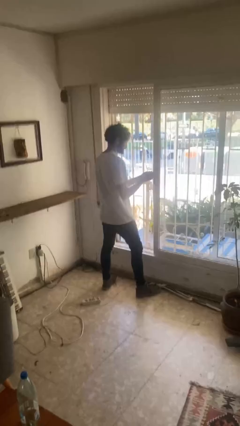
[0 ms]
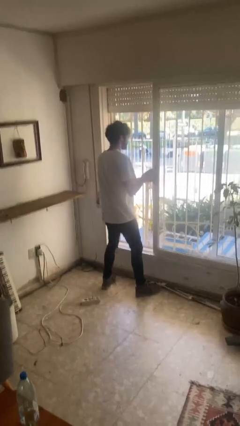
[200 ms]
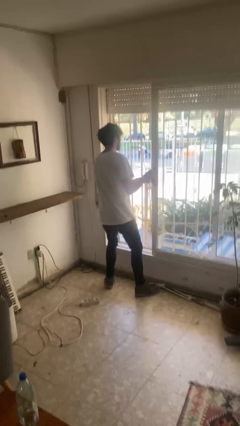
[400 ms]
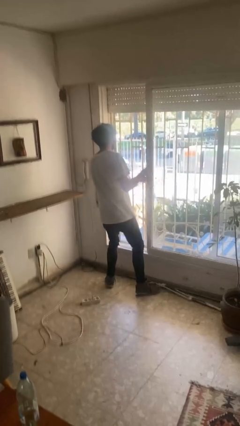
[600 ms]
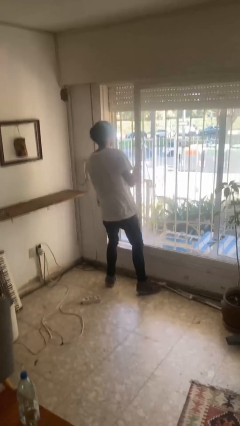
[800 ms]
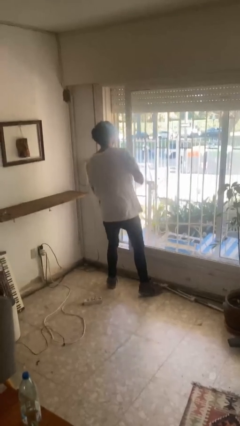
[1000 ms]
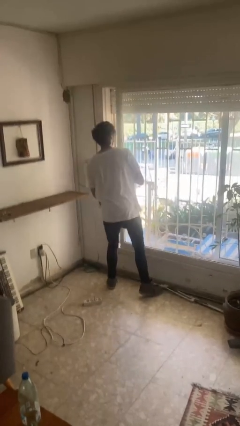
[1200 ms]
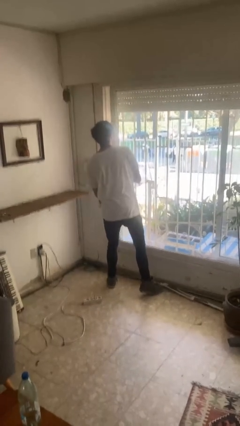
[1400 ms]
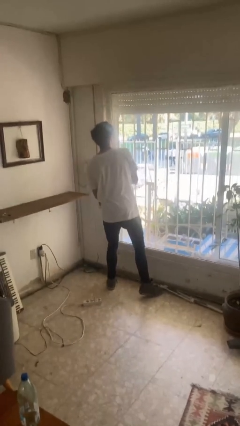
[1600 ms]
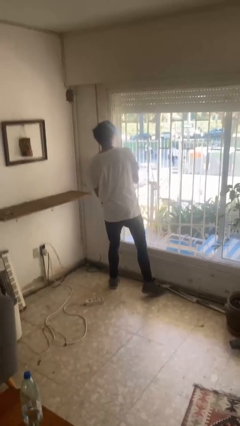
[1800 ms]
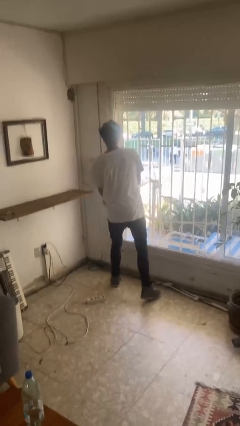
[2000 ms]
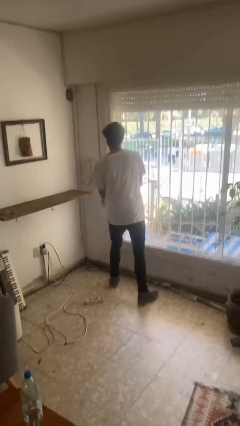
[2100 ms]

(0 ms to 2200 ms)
person closes sliding door

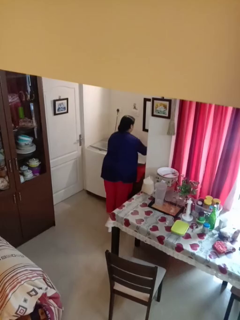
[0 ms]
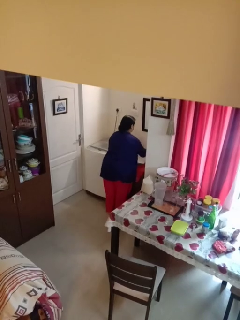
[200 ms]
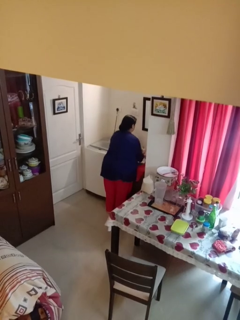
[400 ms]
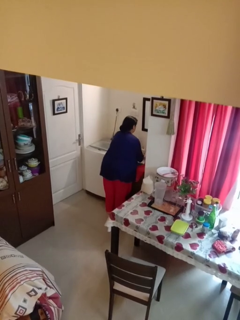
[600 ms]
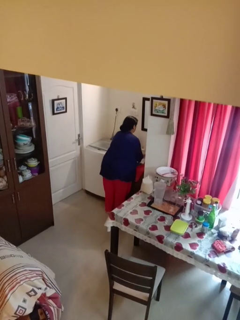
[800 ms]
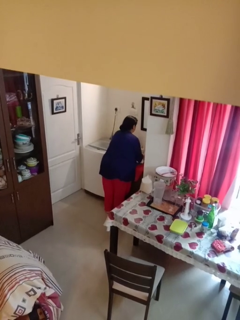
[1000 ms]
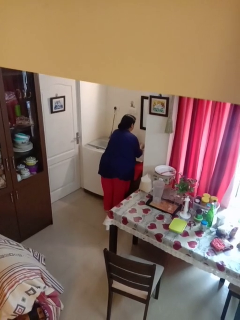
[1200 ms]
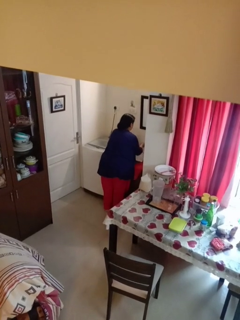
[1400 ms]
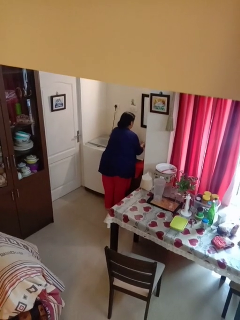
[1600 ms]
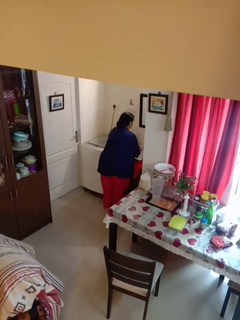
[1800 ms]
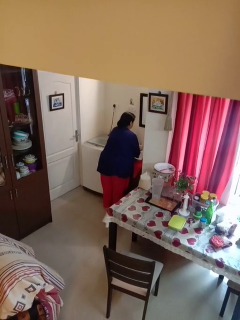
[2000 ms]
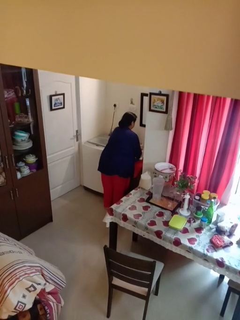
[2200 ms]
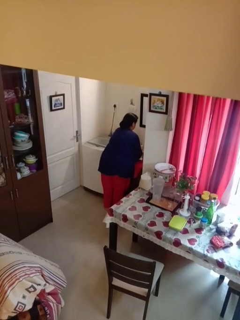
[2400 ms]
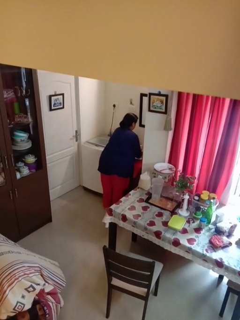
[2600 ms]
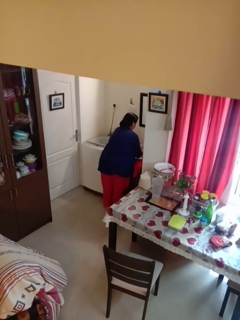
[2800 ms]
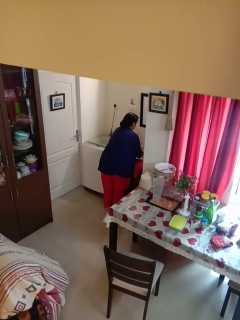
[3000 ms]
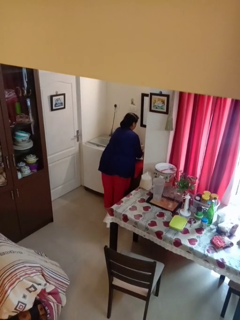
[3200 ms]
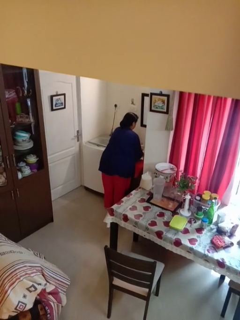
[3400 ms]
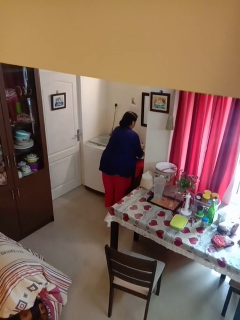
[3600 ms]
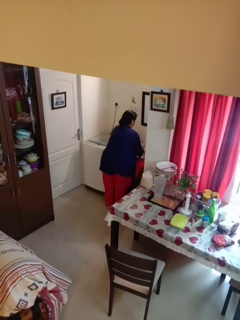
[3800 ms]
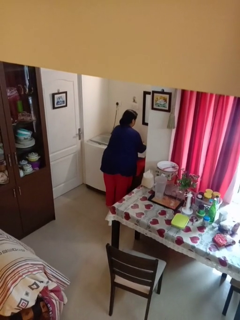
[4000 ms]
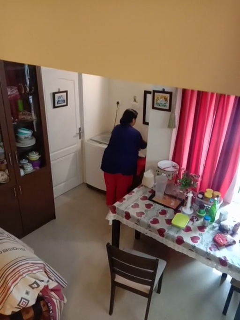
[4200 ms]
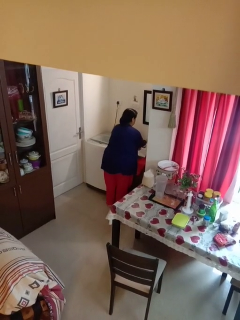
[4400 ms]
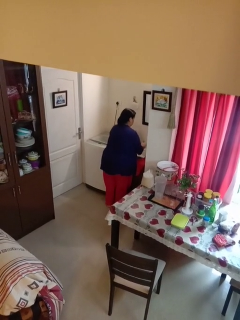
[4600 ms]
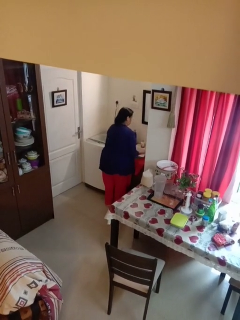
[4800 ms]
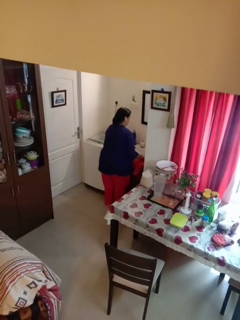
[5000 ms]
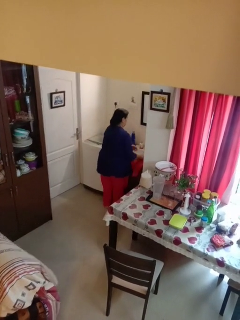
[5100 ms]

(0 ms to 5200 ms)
person washes hands

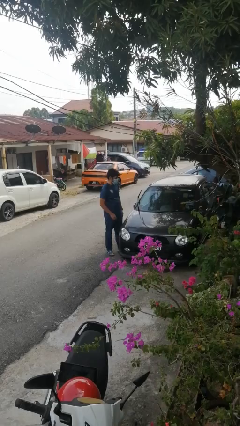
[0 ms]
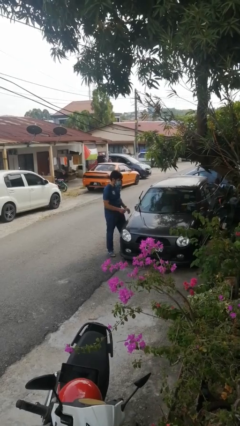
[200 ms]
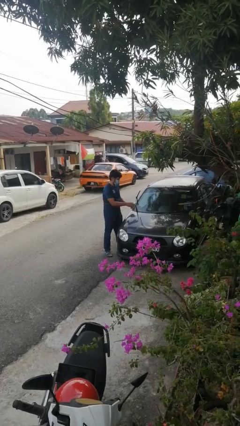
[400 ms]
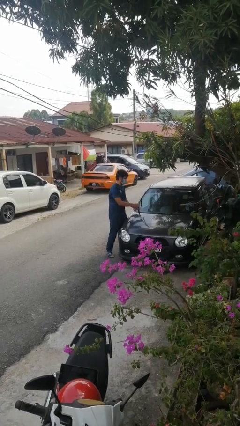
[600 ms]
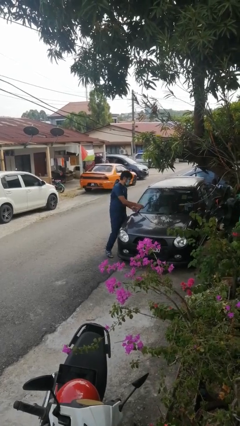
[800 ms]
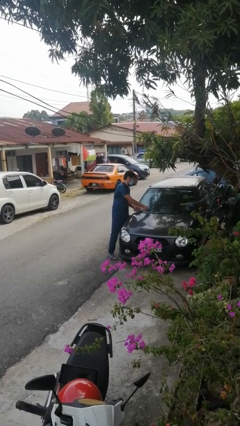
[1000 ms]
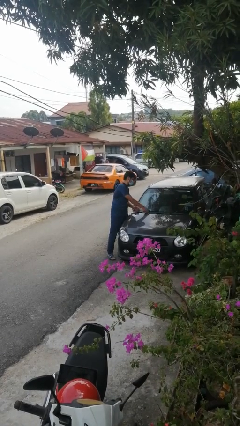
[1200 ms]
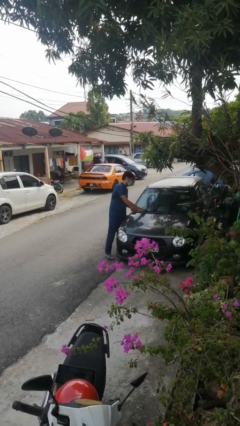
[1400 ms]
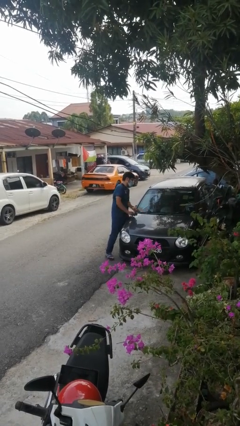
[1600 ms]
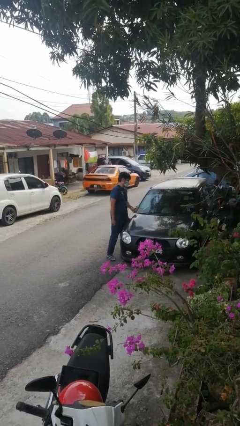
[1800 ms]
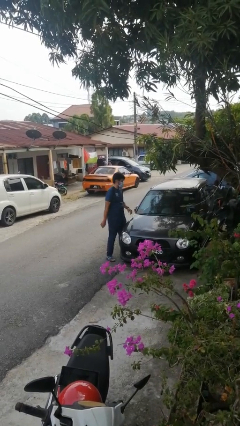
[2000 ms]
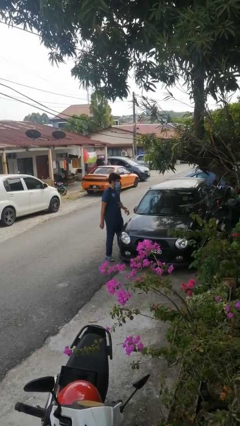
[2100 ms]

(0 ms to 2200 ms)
person flips down car wipers

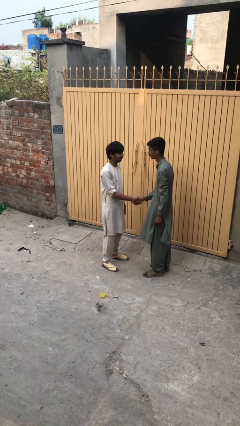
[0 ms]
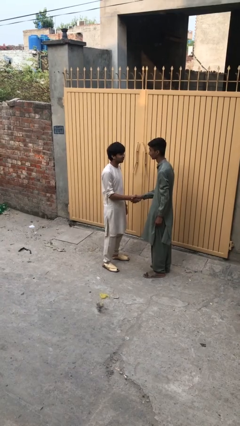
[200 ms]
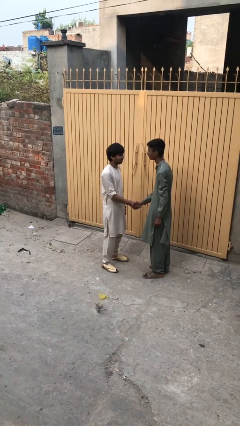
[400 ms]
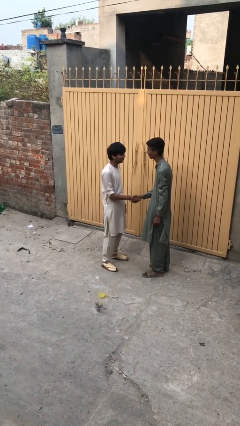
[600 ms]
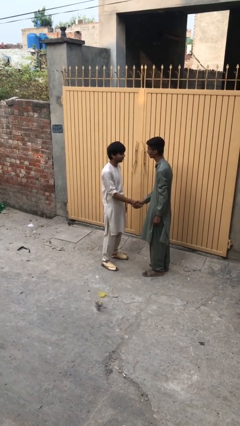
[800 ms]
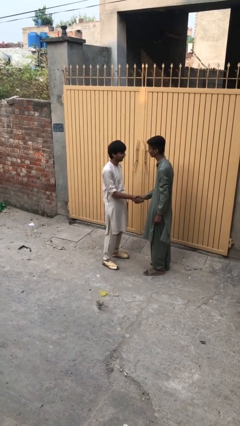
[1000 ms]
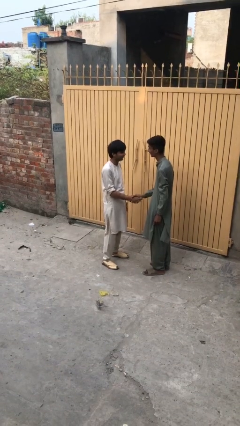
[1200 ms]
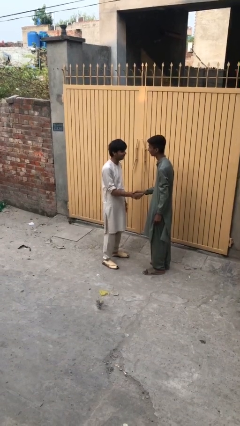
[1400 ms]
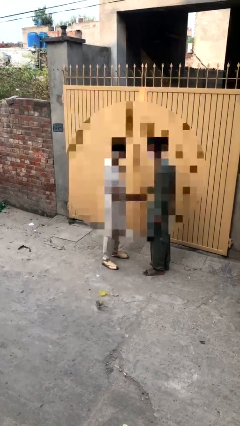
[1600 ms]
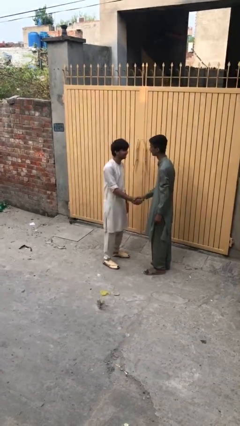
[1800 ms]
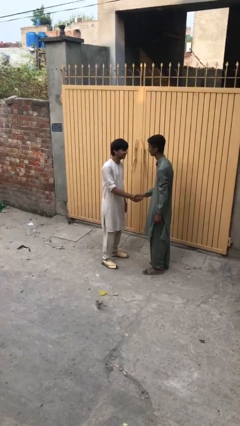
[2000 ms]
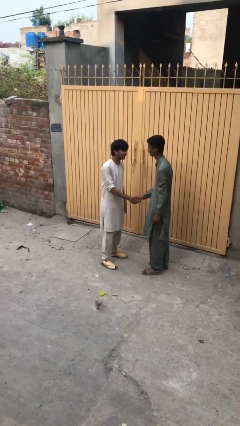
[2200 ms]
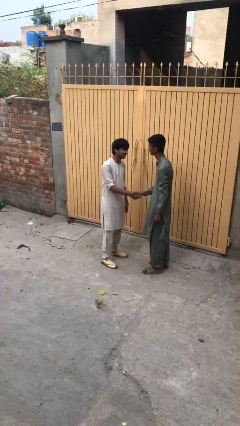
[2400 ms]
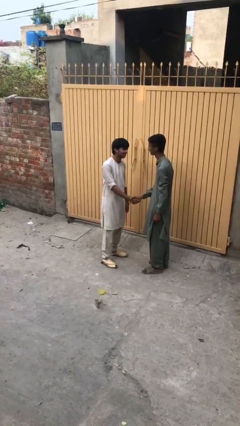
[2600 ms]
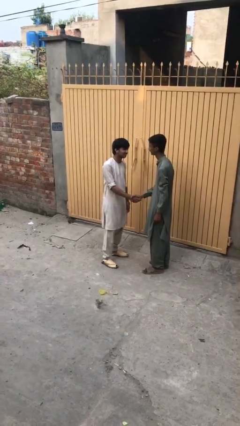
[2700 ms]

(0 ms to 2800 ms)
person shakes hand

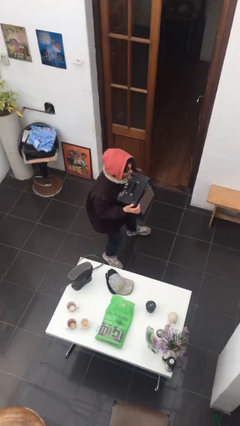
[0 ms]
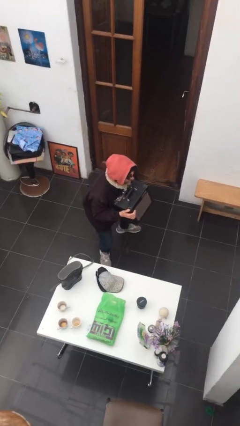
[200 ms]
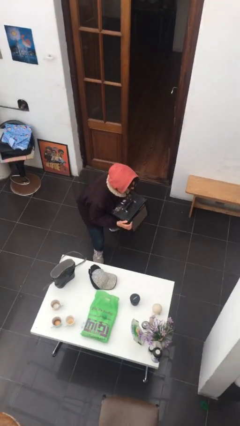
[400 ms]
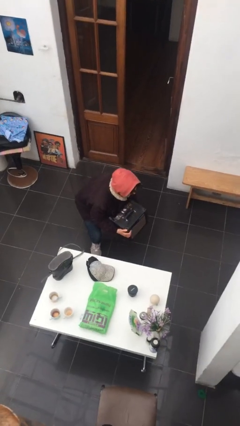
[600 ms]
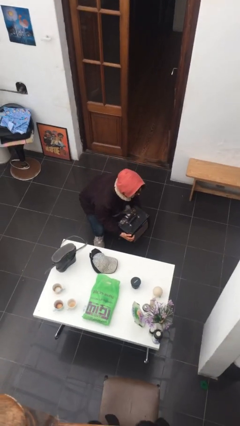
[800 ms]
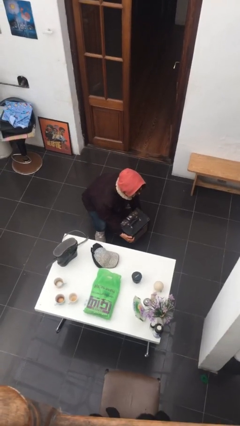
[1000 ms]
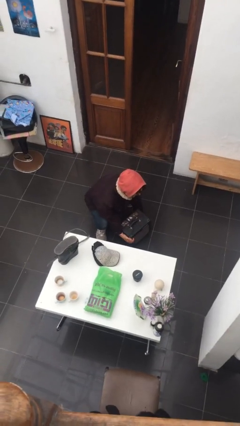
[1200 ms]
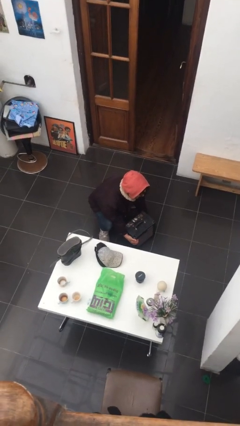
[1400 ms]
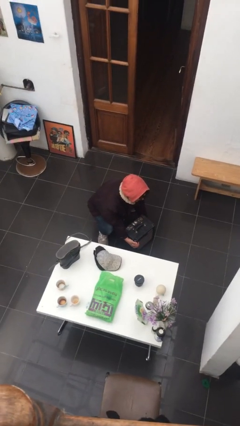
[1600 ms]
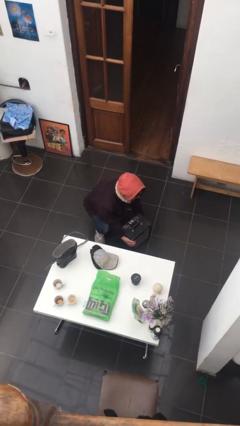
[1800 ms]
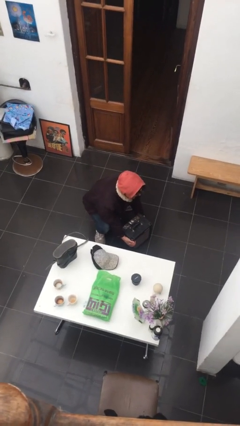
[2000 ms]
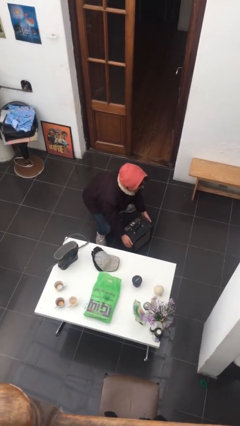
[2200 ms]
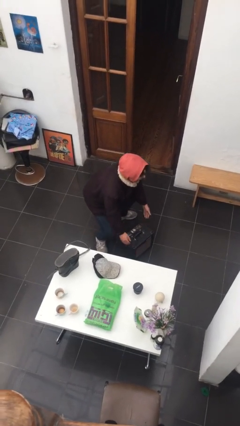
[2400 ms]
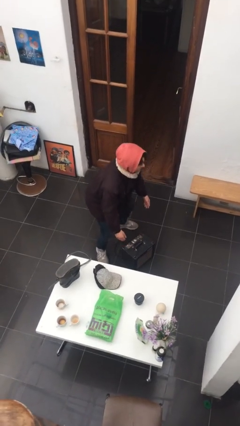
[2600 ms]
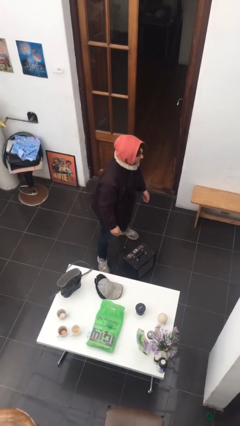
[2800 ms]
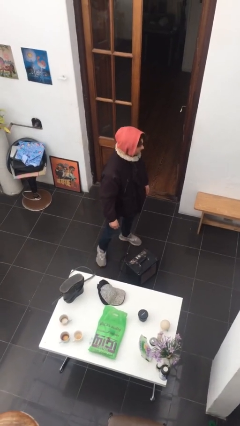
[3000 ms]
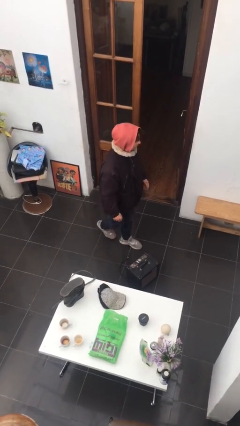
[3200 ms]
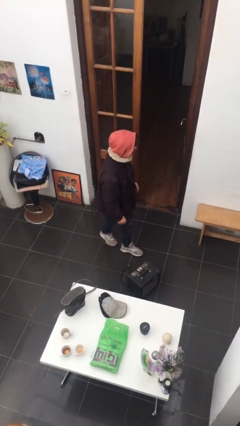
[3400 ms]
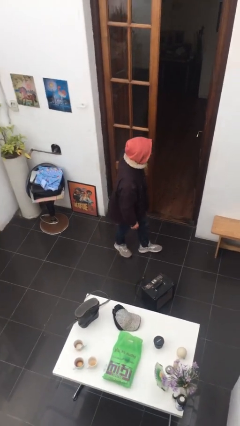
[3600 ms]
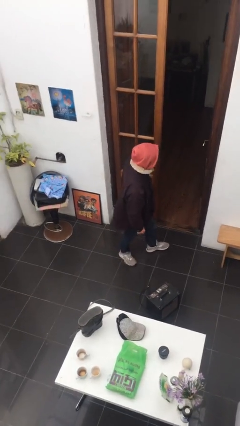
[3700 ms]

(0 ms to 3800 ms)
person puts down object on floor

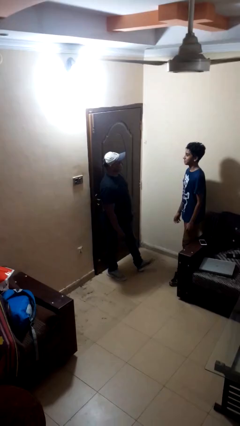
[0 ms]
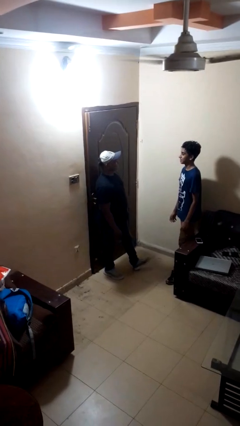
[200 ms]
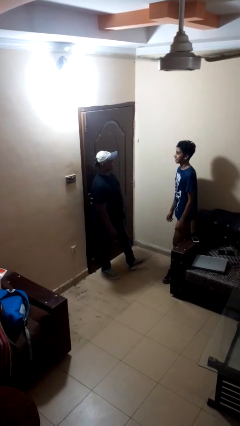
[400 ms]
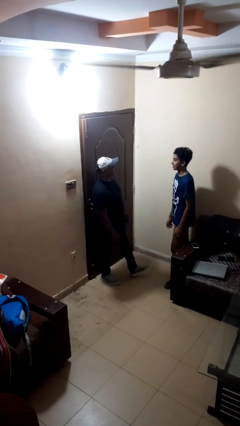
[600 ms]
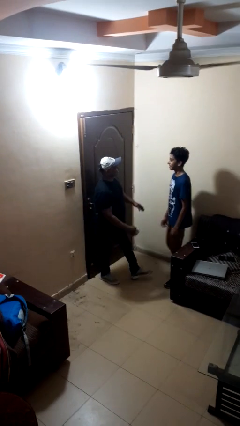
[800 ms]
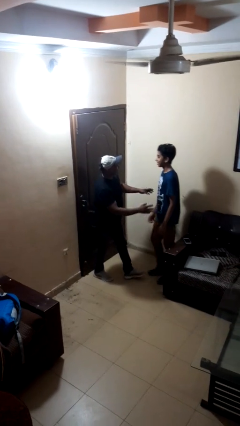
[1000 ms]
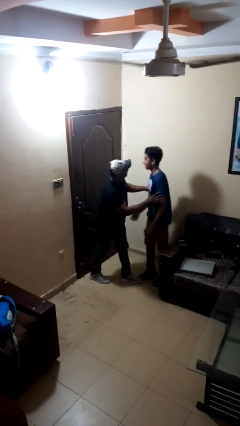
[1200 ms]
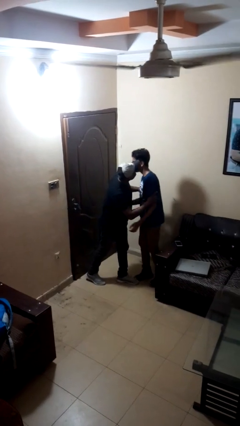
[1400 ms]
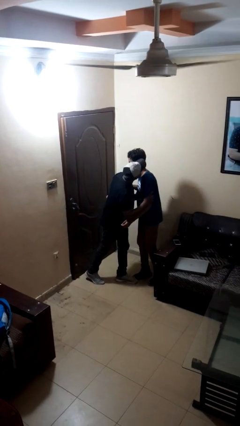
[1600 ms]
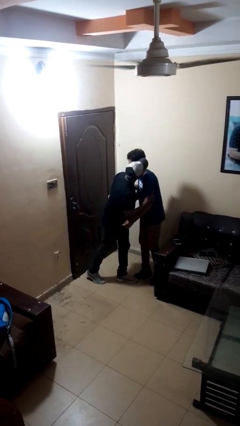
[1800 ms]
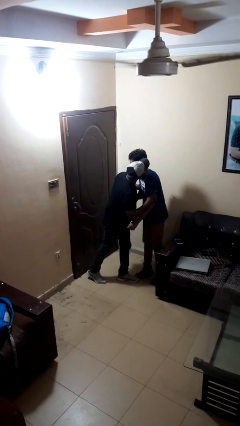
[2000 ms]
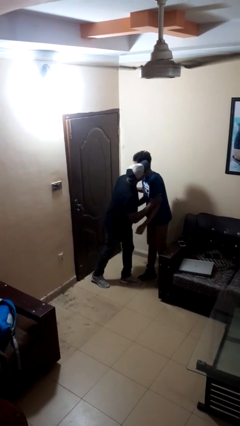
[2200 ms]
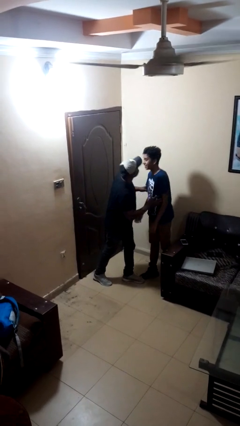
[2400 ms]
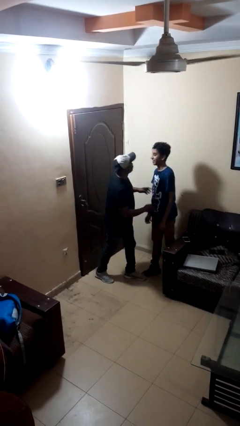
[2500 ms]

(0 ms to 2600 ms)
person kisses cheek of person
